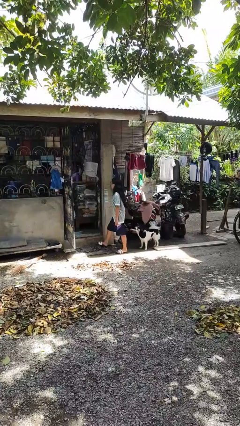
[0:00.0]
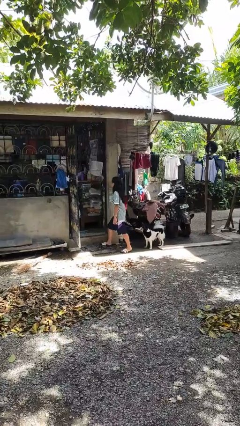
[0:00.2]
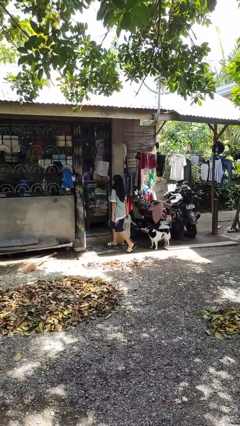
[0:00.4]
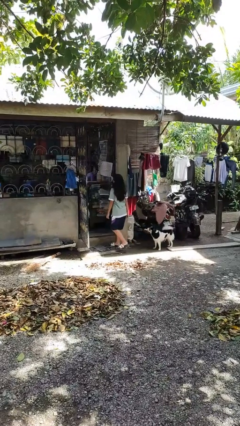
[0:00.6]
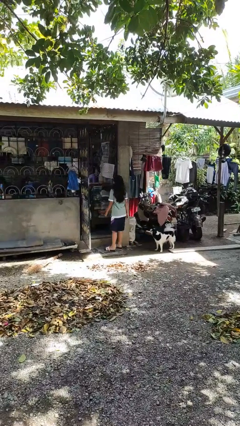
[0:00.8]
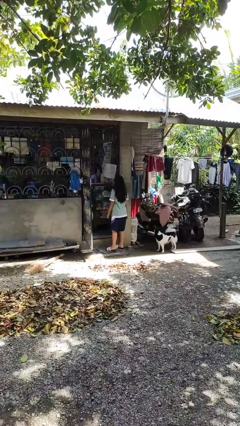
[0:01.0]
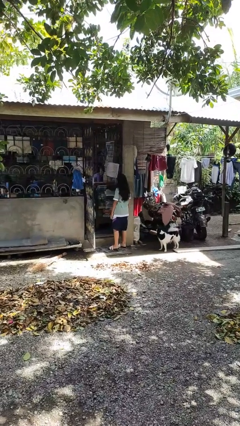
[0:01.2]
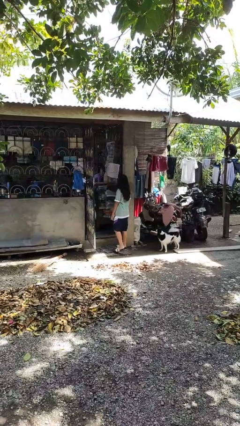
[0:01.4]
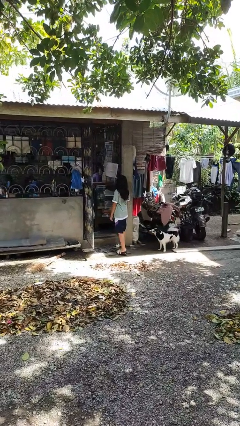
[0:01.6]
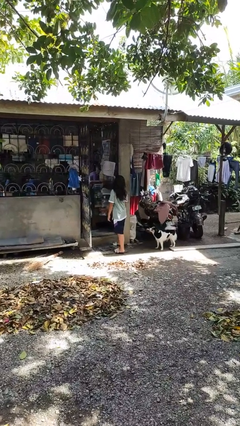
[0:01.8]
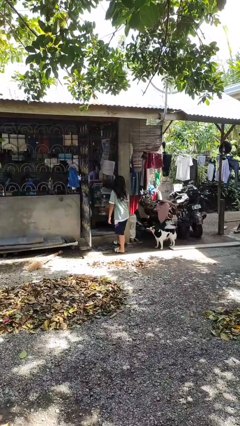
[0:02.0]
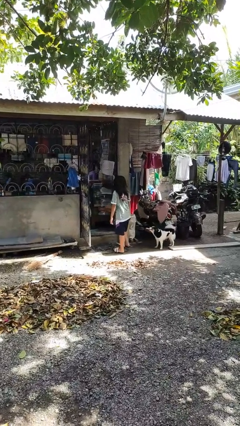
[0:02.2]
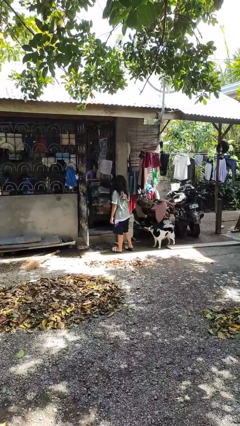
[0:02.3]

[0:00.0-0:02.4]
person bumps into wall

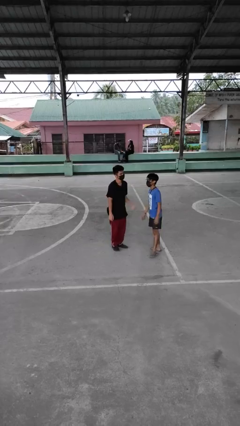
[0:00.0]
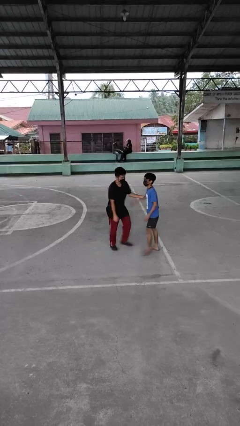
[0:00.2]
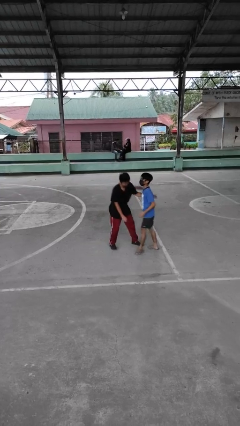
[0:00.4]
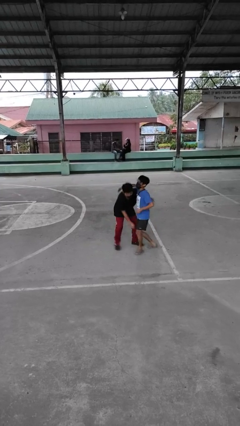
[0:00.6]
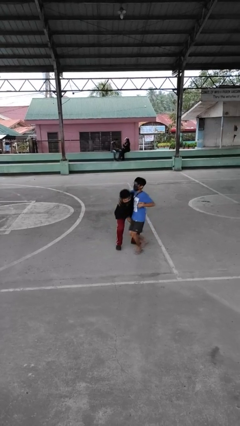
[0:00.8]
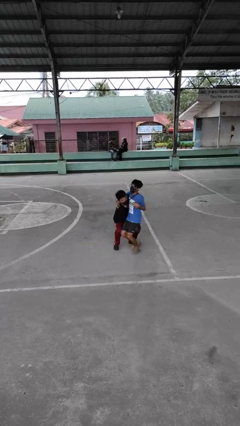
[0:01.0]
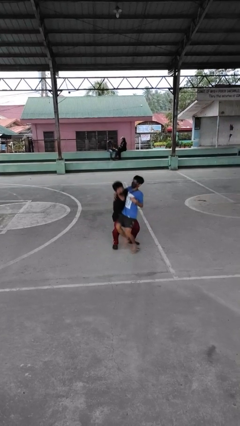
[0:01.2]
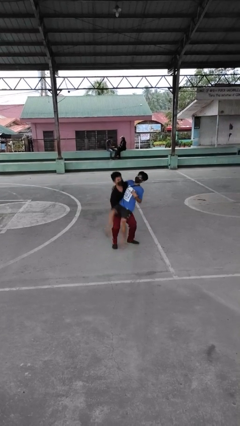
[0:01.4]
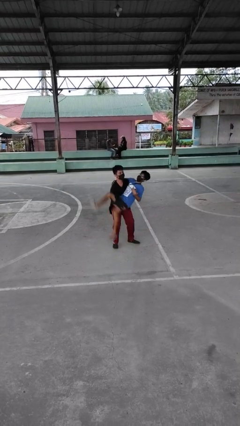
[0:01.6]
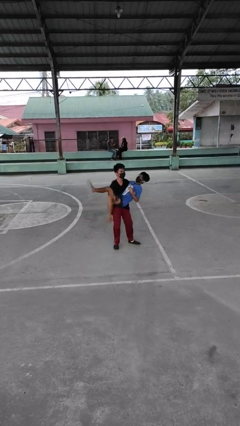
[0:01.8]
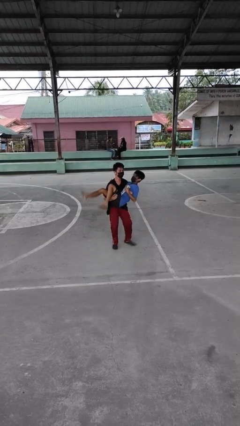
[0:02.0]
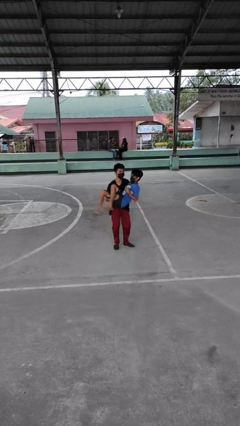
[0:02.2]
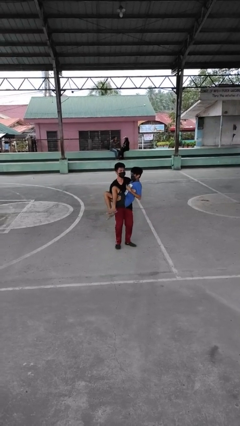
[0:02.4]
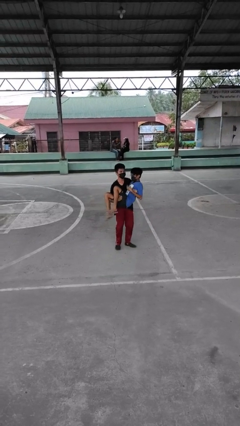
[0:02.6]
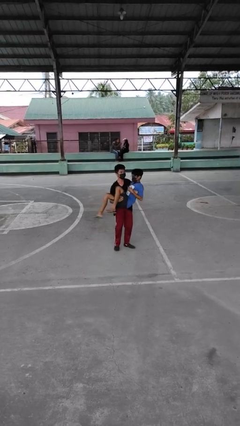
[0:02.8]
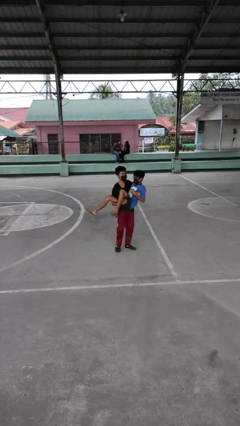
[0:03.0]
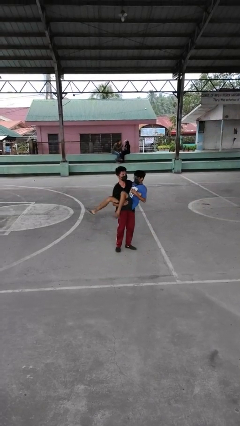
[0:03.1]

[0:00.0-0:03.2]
person picks up person

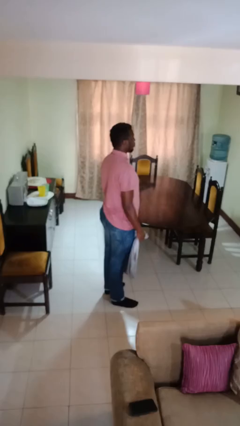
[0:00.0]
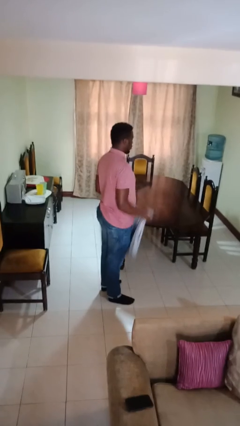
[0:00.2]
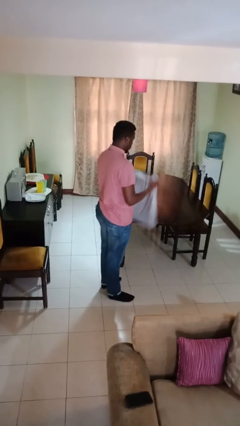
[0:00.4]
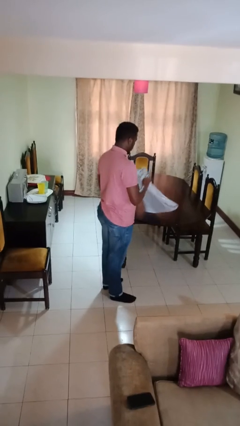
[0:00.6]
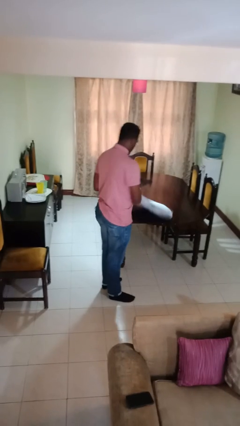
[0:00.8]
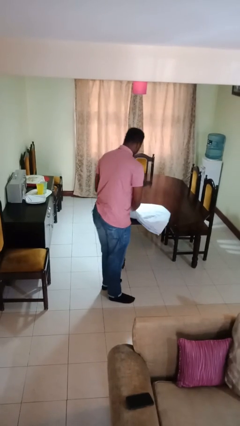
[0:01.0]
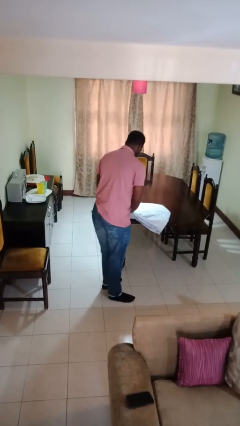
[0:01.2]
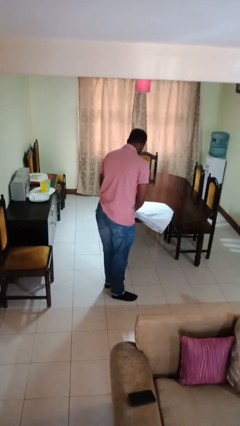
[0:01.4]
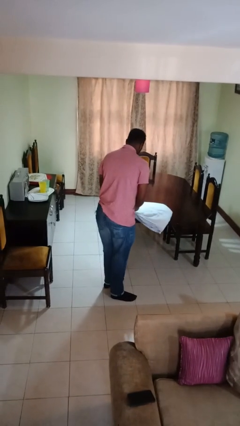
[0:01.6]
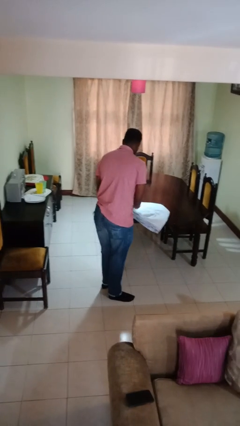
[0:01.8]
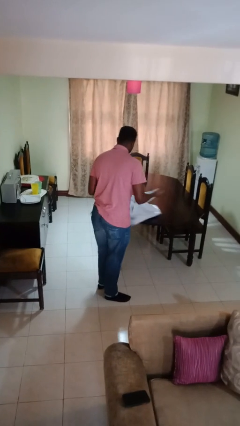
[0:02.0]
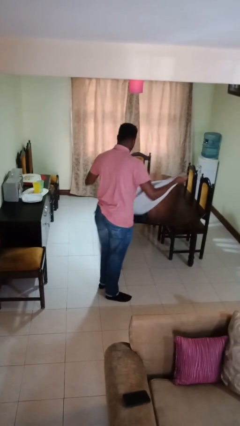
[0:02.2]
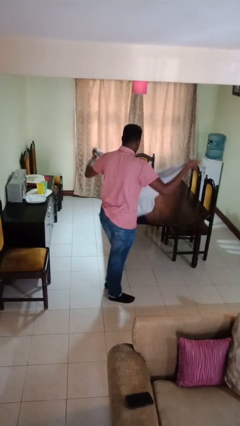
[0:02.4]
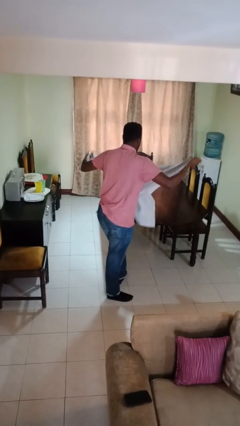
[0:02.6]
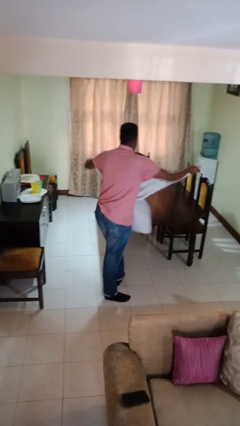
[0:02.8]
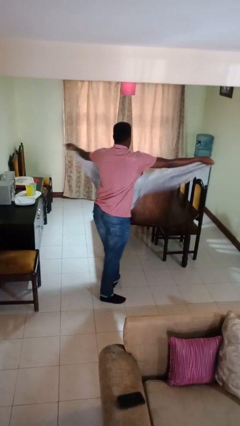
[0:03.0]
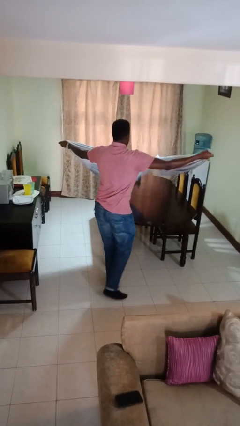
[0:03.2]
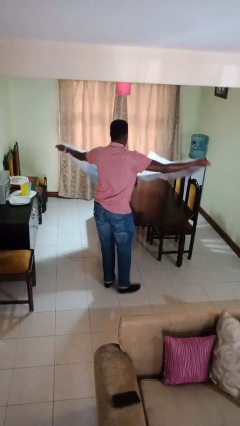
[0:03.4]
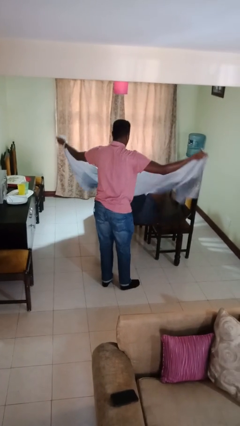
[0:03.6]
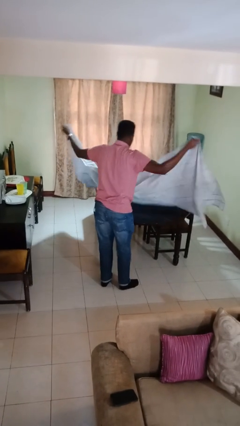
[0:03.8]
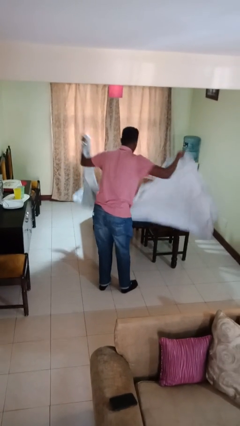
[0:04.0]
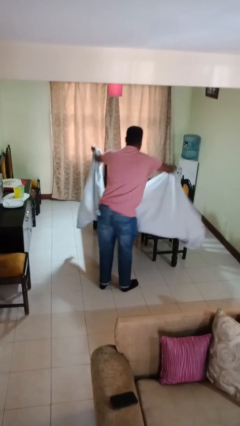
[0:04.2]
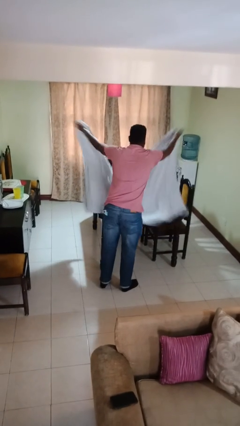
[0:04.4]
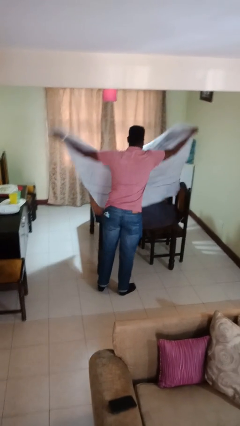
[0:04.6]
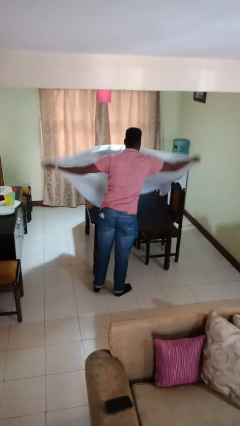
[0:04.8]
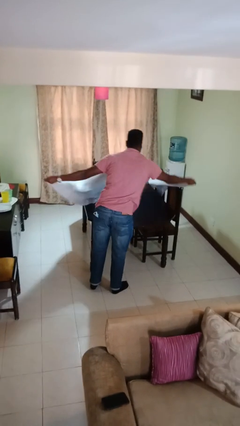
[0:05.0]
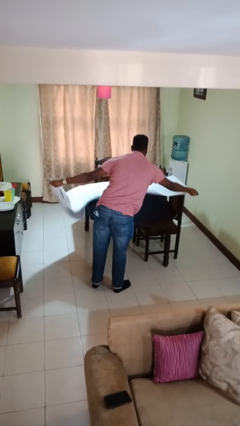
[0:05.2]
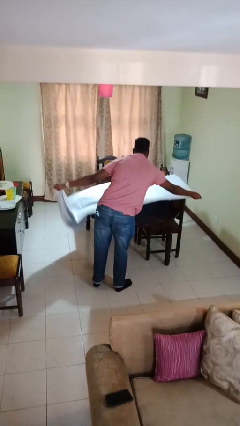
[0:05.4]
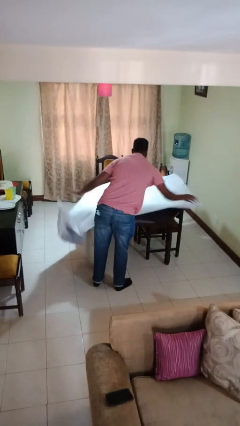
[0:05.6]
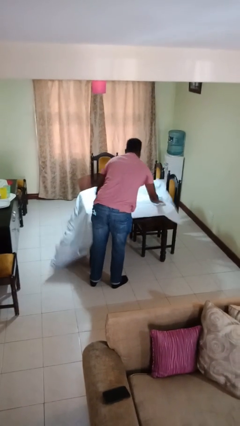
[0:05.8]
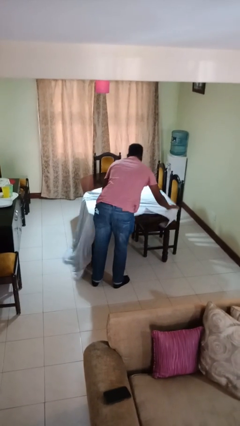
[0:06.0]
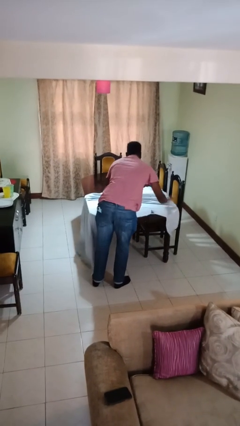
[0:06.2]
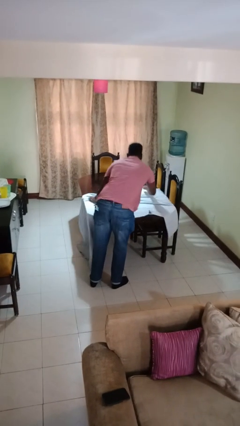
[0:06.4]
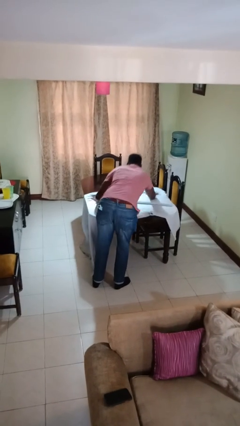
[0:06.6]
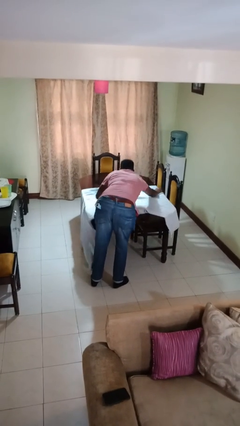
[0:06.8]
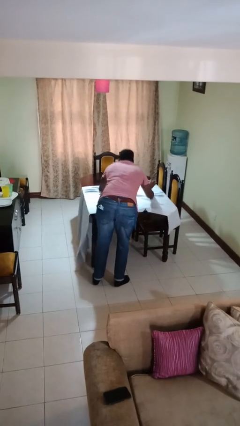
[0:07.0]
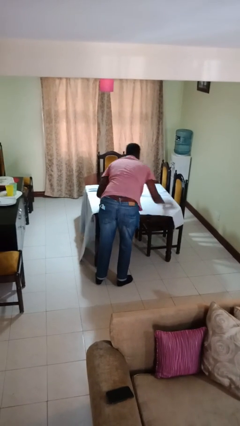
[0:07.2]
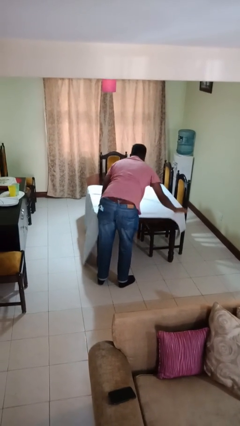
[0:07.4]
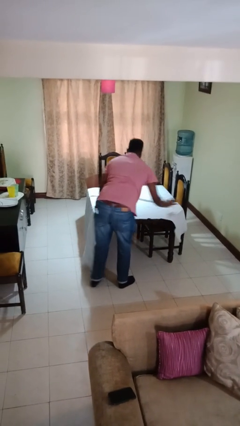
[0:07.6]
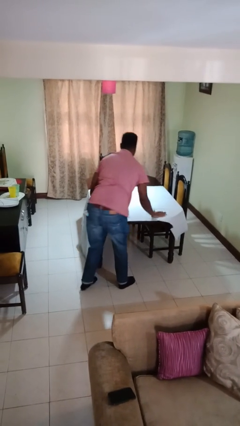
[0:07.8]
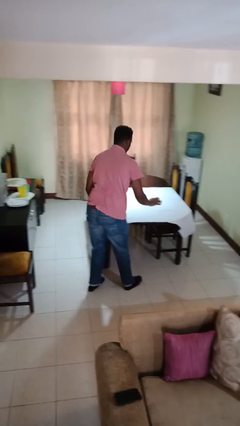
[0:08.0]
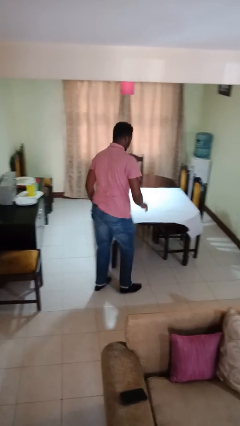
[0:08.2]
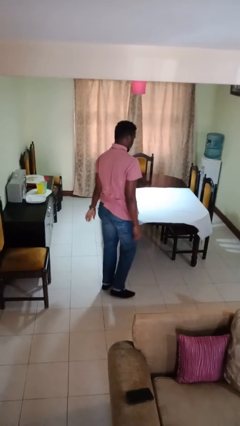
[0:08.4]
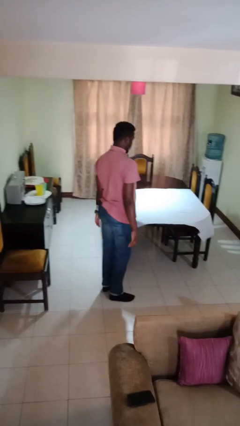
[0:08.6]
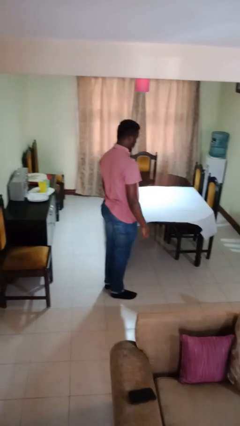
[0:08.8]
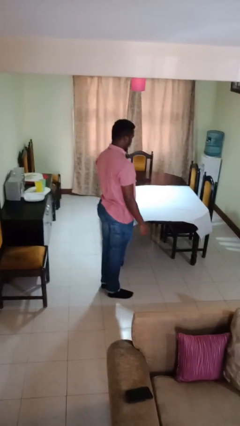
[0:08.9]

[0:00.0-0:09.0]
person spreads tablecloth

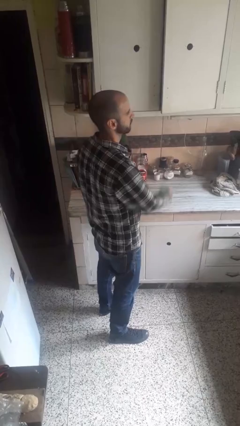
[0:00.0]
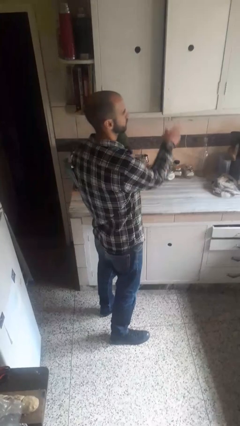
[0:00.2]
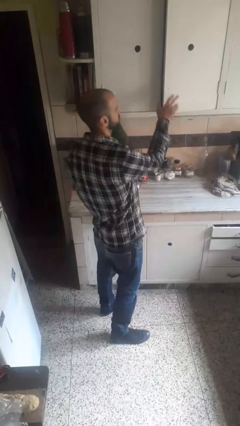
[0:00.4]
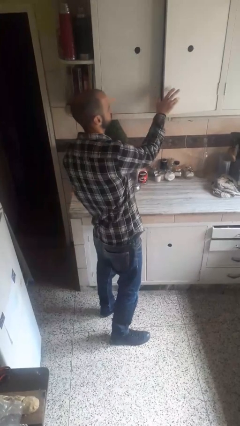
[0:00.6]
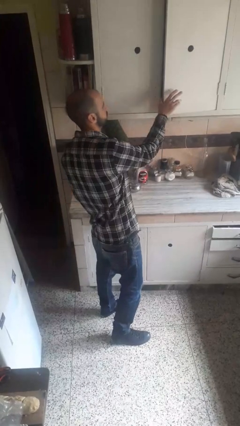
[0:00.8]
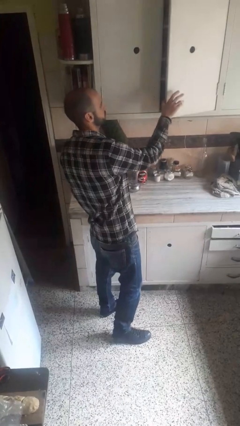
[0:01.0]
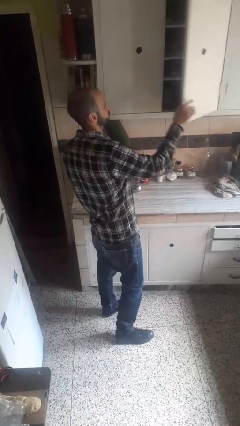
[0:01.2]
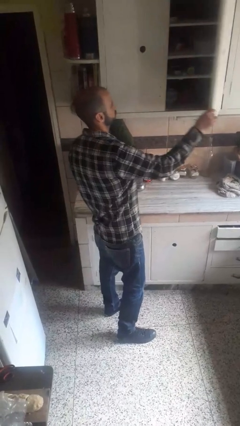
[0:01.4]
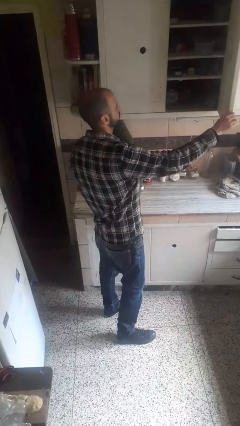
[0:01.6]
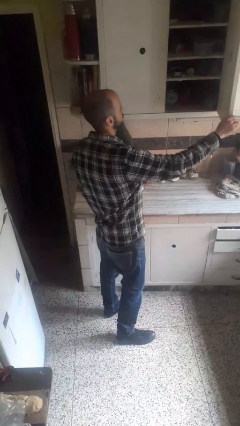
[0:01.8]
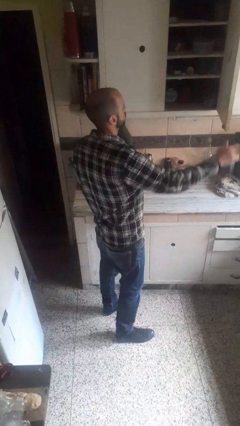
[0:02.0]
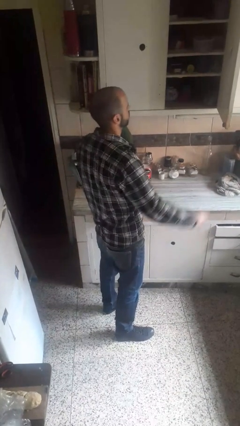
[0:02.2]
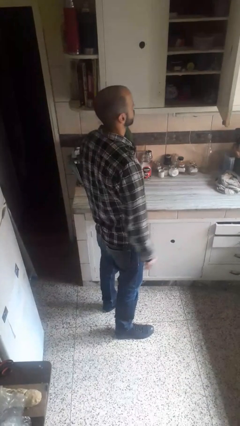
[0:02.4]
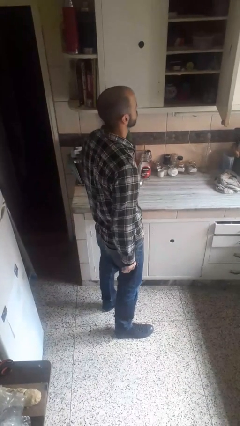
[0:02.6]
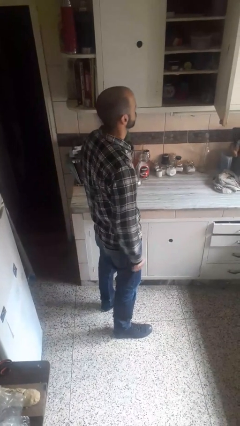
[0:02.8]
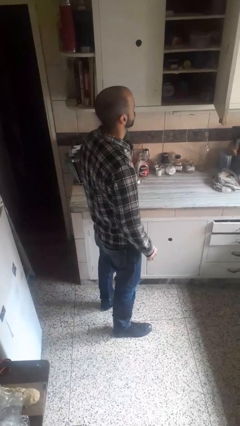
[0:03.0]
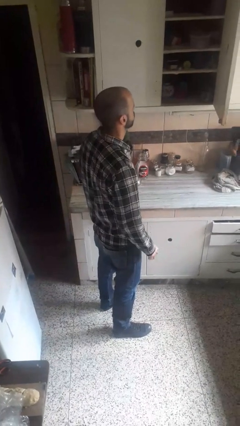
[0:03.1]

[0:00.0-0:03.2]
person opens closet door
